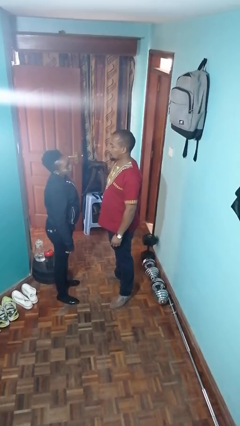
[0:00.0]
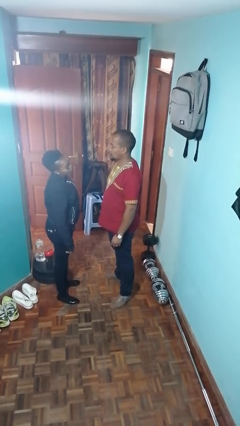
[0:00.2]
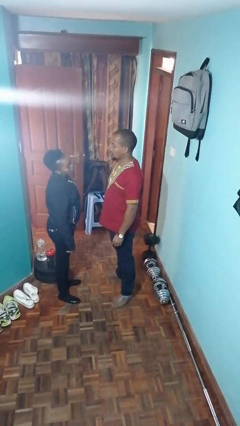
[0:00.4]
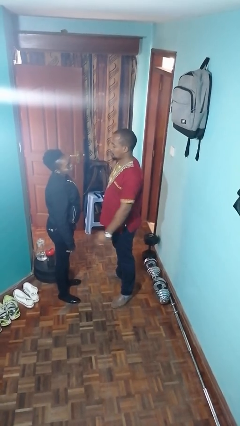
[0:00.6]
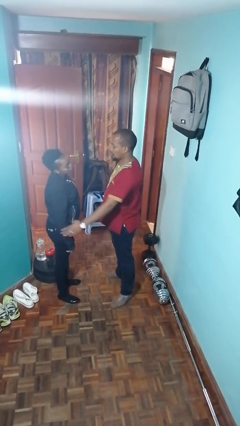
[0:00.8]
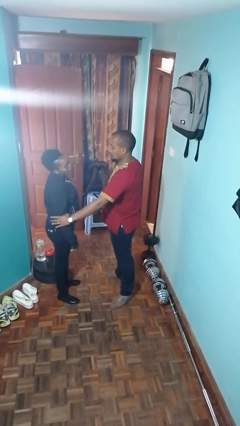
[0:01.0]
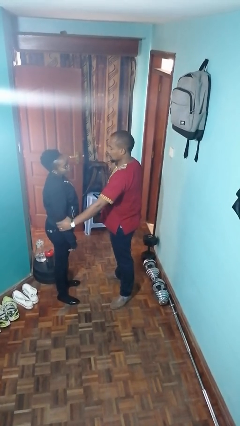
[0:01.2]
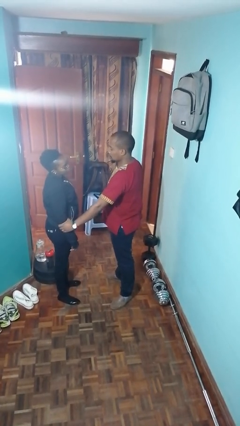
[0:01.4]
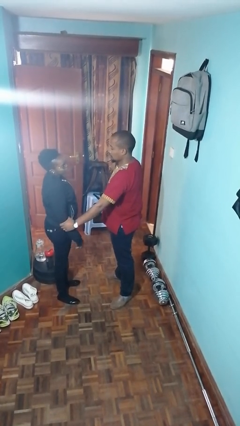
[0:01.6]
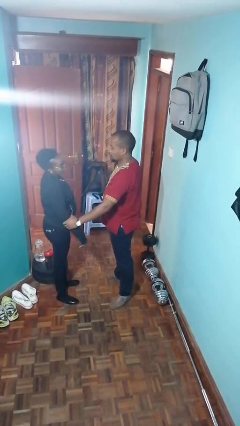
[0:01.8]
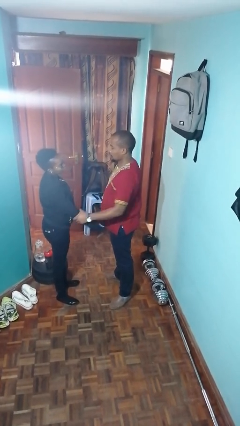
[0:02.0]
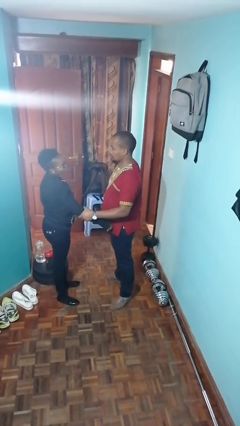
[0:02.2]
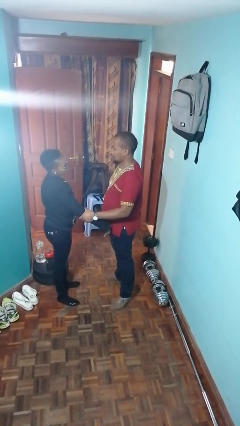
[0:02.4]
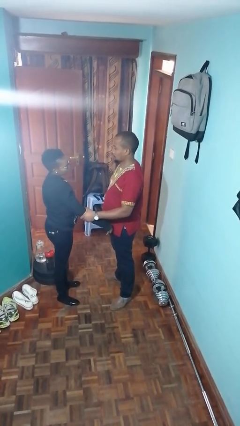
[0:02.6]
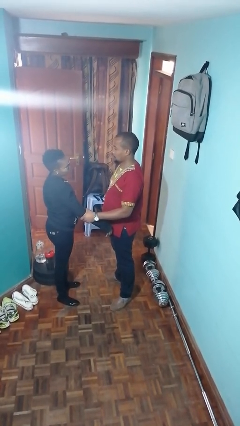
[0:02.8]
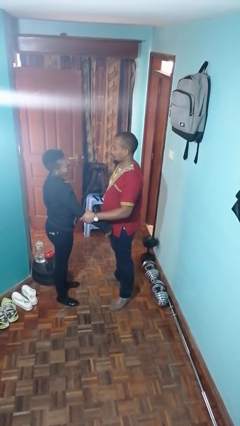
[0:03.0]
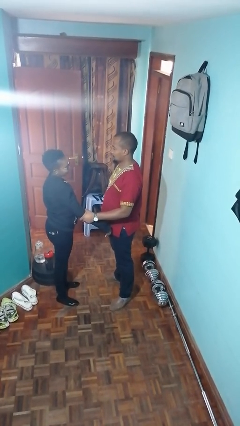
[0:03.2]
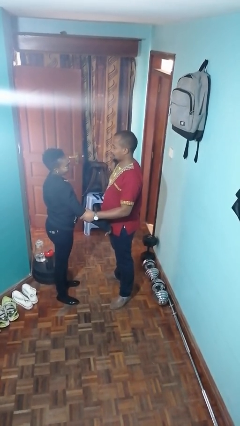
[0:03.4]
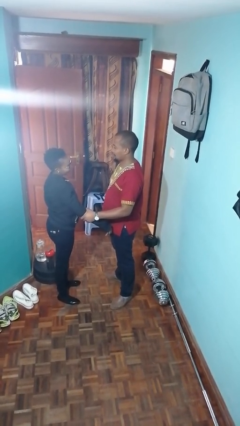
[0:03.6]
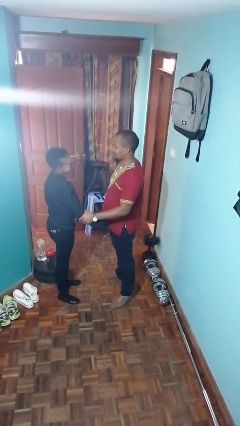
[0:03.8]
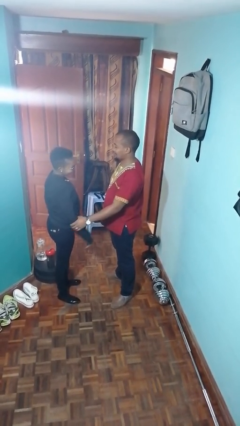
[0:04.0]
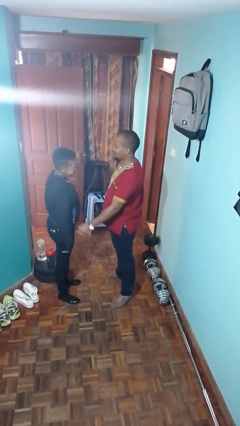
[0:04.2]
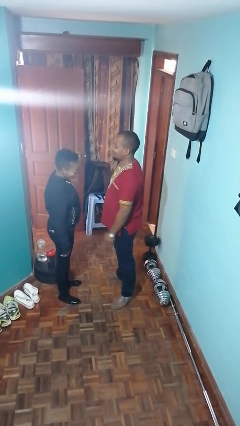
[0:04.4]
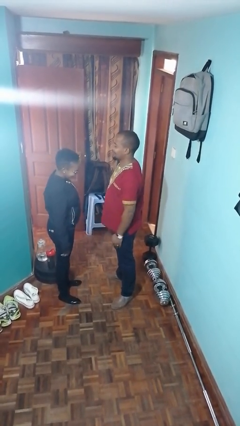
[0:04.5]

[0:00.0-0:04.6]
person grabs person by forearm

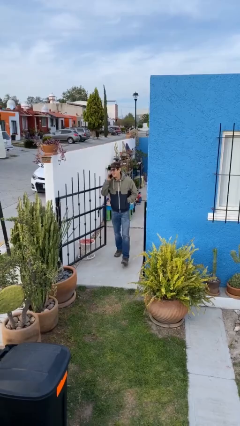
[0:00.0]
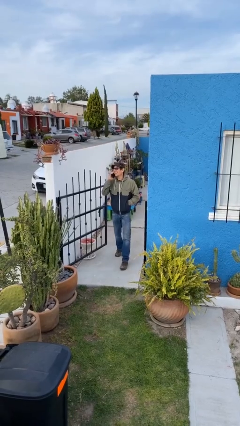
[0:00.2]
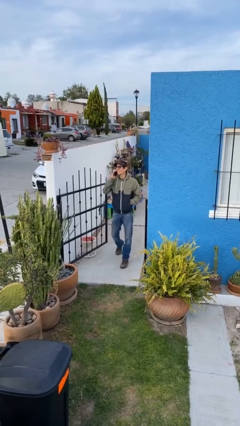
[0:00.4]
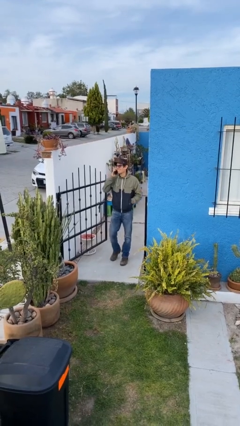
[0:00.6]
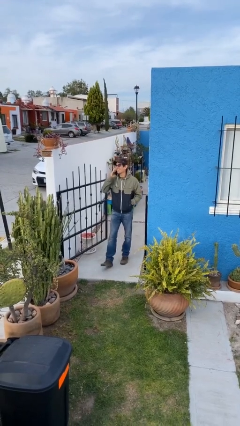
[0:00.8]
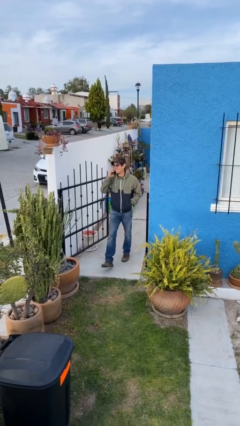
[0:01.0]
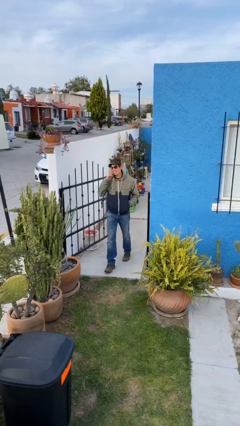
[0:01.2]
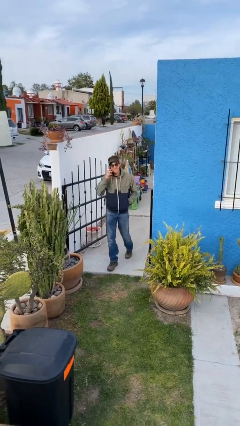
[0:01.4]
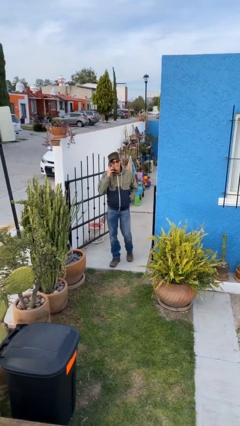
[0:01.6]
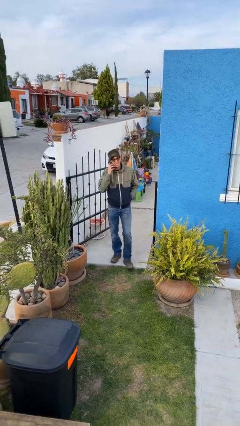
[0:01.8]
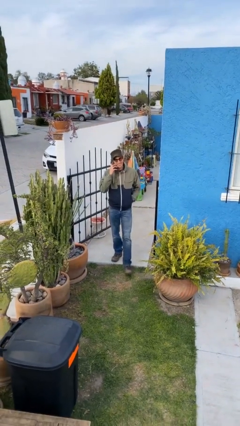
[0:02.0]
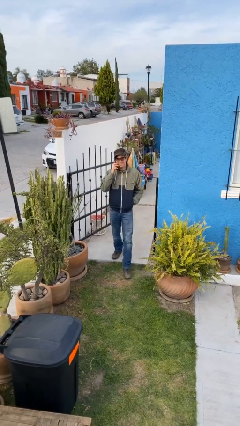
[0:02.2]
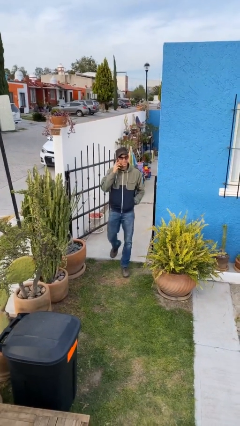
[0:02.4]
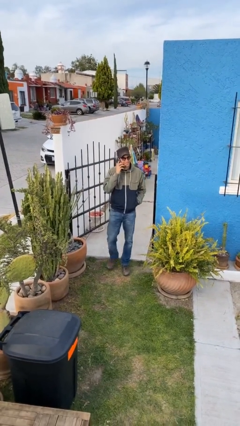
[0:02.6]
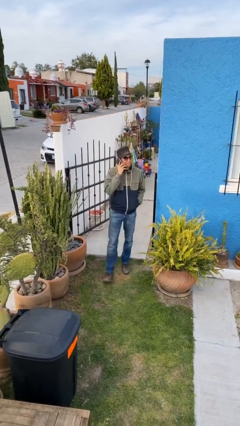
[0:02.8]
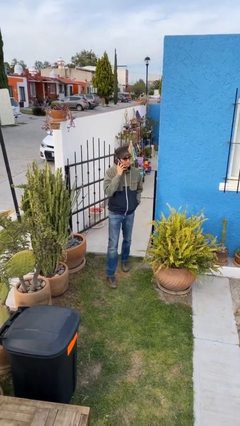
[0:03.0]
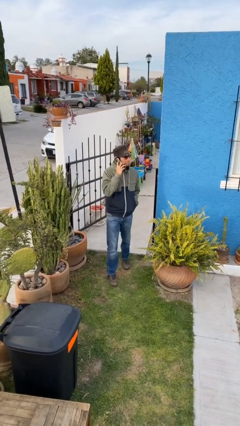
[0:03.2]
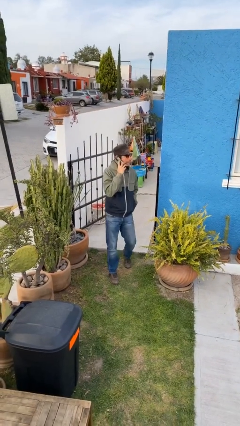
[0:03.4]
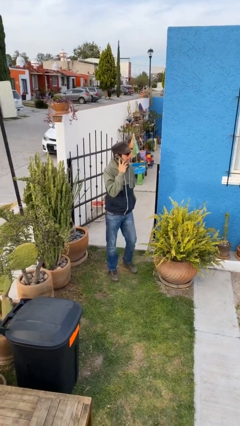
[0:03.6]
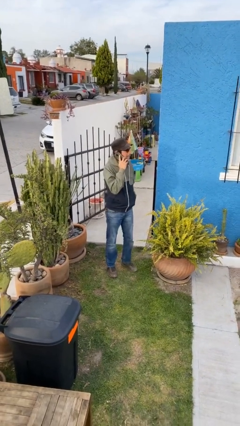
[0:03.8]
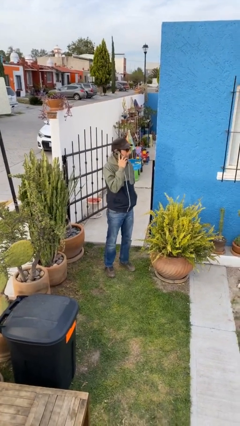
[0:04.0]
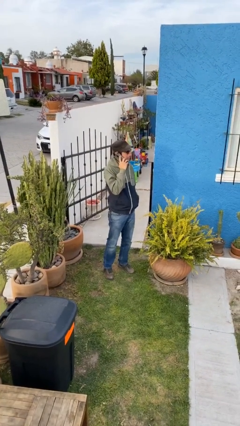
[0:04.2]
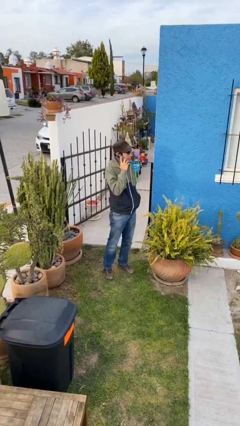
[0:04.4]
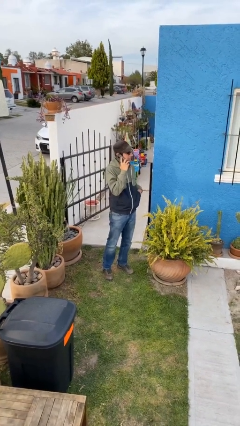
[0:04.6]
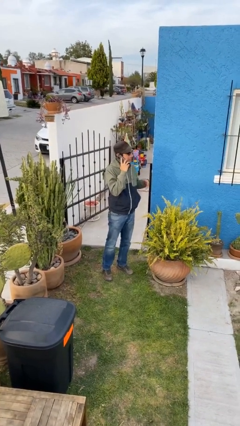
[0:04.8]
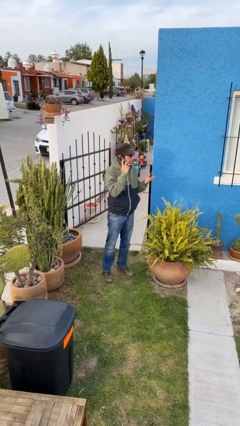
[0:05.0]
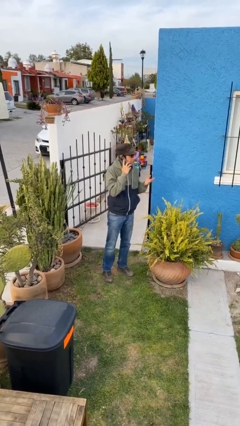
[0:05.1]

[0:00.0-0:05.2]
person enters scene through structure

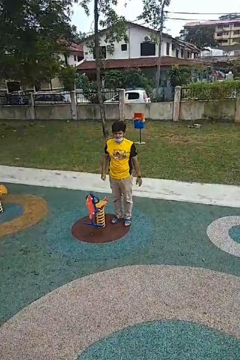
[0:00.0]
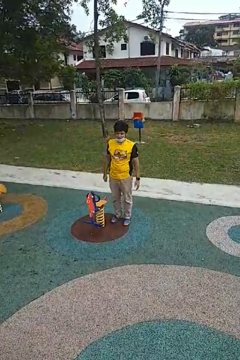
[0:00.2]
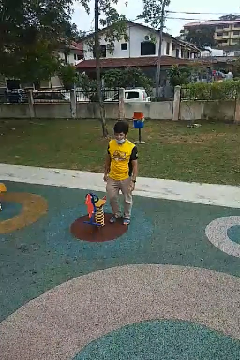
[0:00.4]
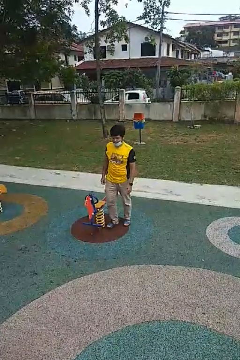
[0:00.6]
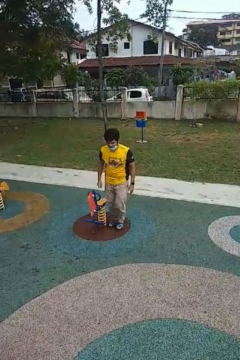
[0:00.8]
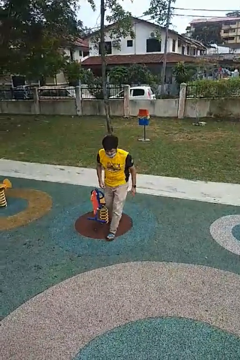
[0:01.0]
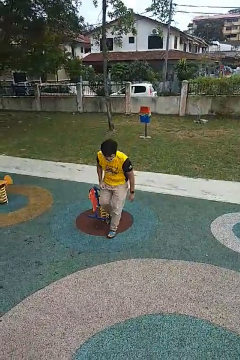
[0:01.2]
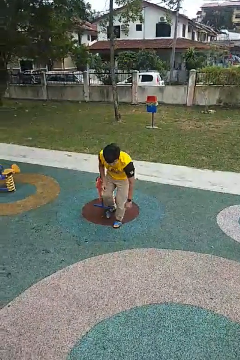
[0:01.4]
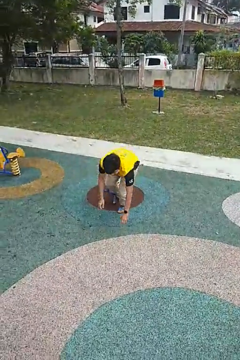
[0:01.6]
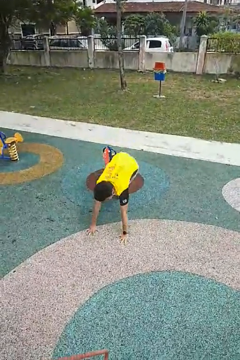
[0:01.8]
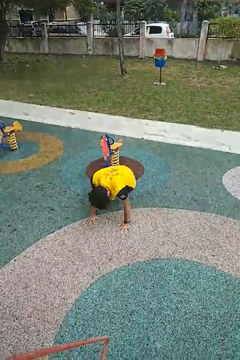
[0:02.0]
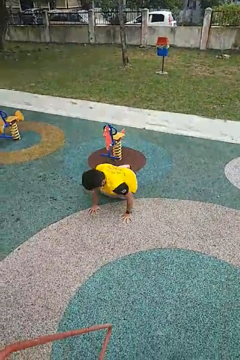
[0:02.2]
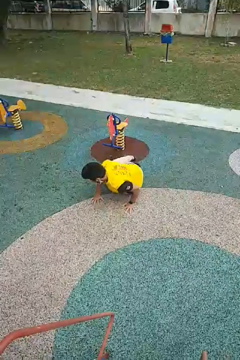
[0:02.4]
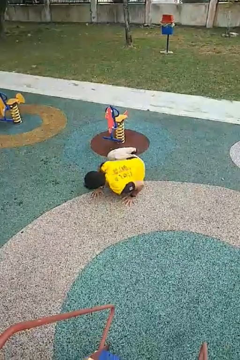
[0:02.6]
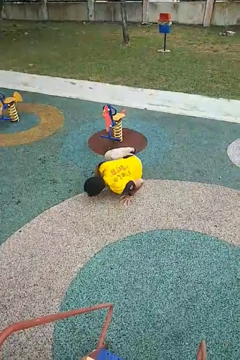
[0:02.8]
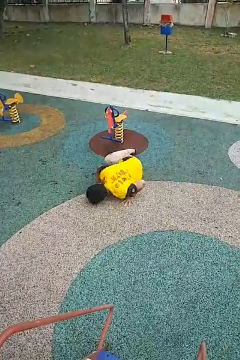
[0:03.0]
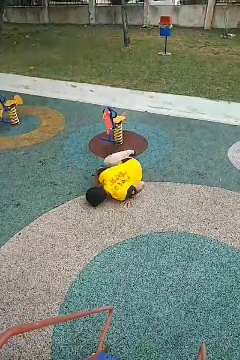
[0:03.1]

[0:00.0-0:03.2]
person trips on object on floor

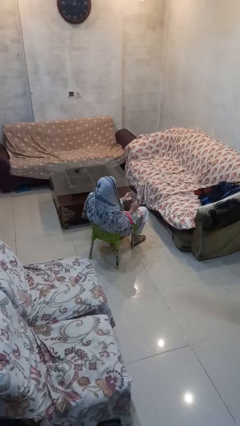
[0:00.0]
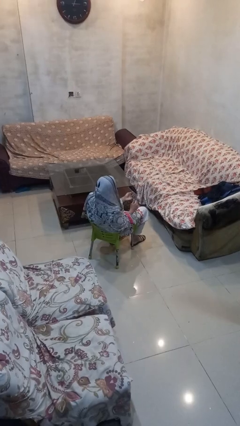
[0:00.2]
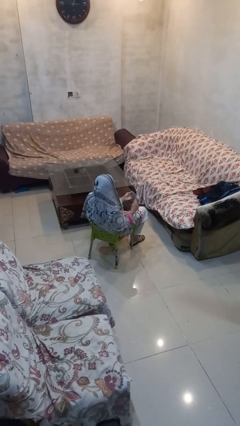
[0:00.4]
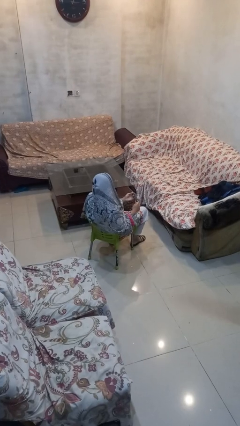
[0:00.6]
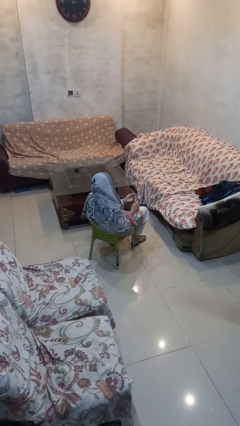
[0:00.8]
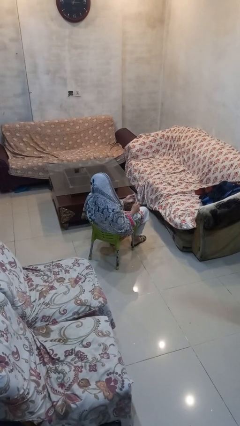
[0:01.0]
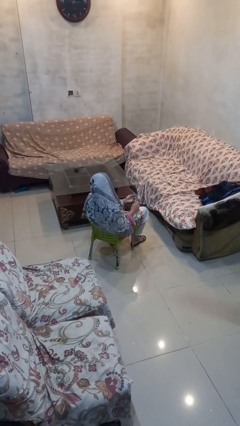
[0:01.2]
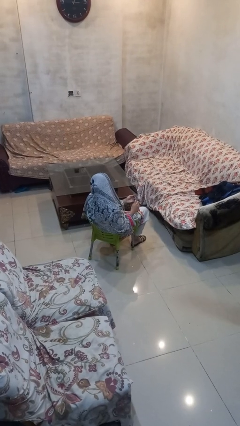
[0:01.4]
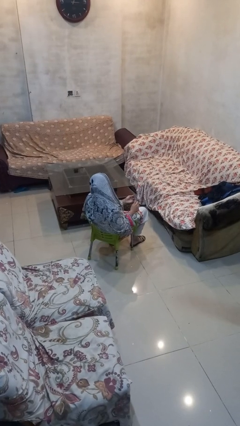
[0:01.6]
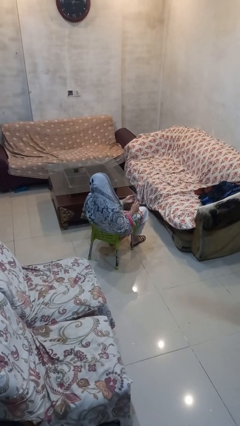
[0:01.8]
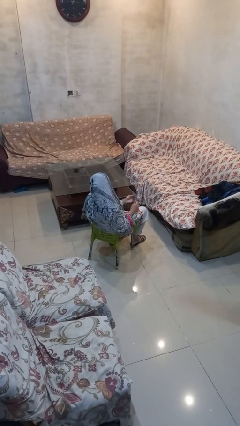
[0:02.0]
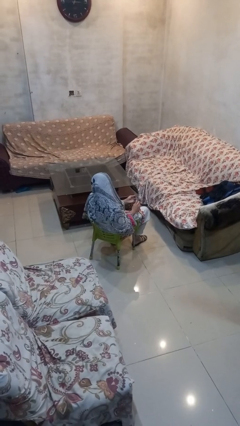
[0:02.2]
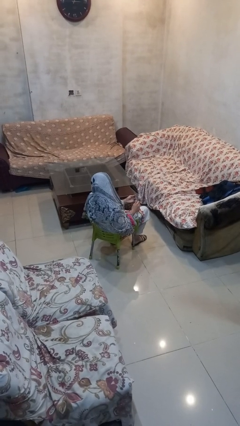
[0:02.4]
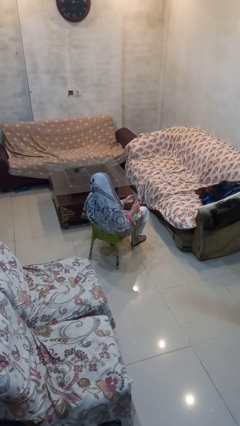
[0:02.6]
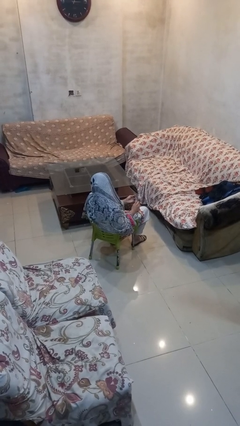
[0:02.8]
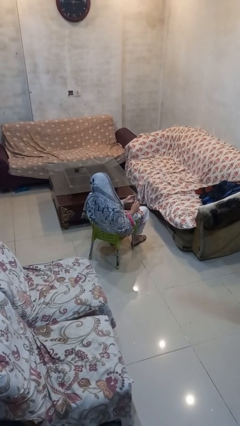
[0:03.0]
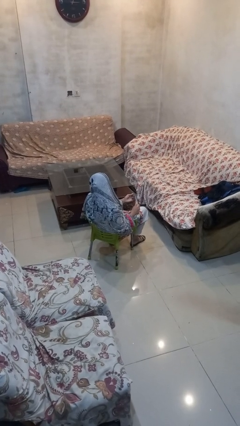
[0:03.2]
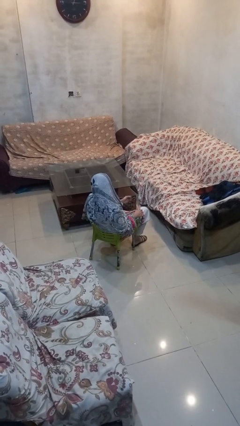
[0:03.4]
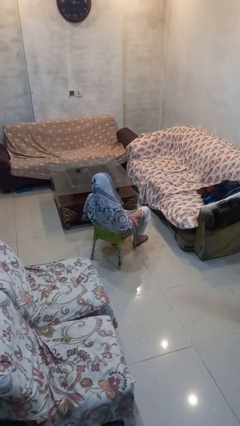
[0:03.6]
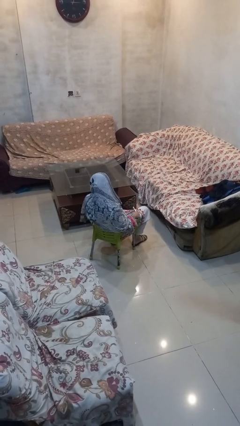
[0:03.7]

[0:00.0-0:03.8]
person files fingernails

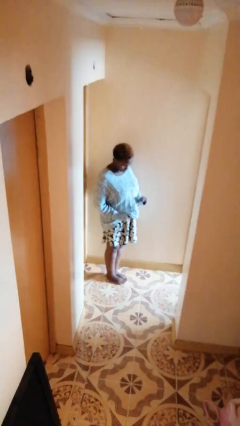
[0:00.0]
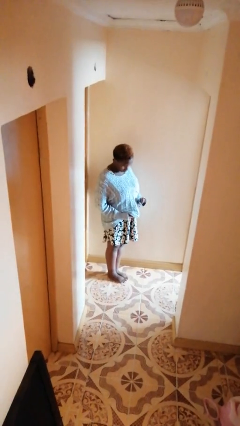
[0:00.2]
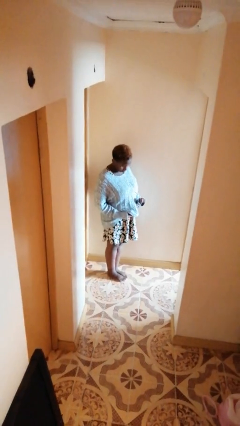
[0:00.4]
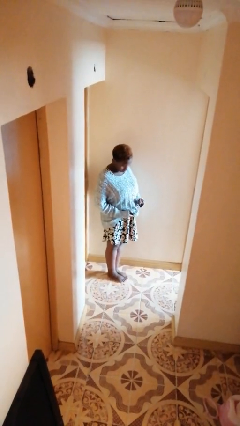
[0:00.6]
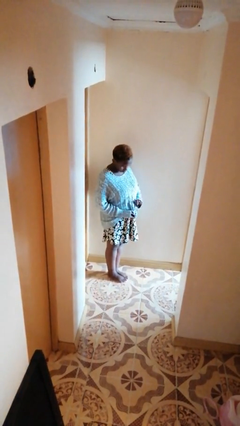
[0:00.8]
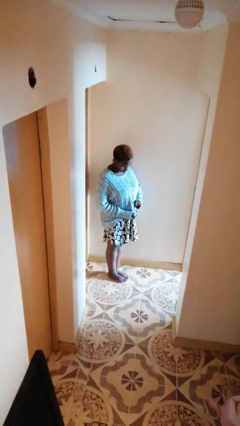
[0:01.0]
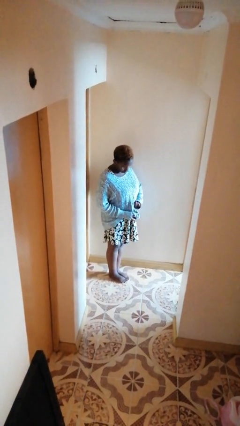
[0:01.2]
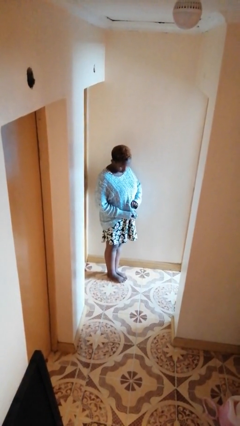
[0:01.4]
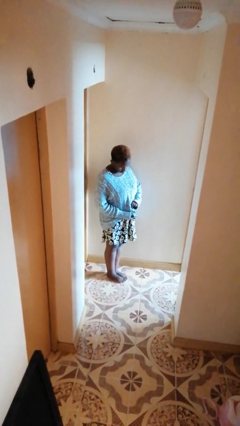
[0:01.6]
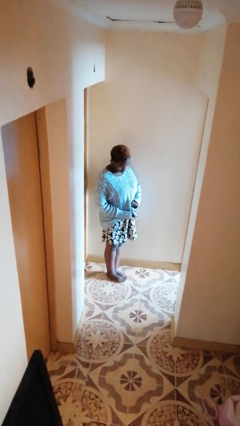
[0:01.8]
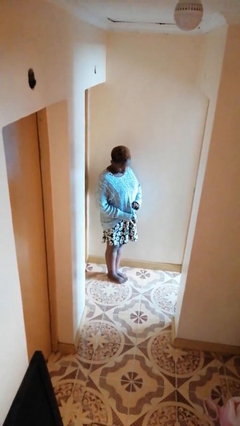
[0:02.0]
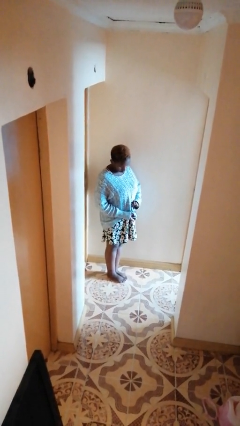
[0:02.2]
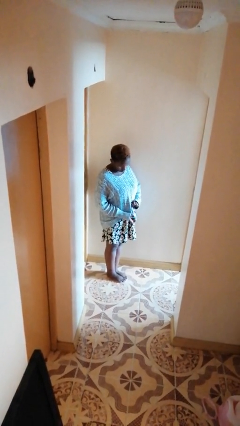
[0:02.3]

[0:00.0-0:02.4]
person cleans eyeglasses
